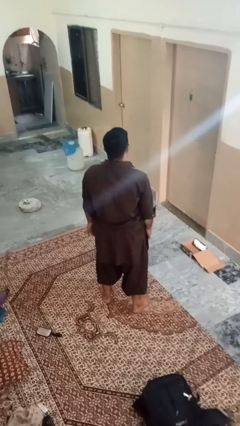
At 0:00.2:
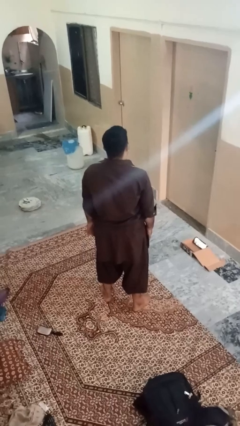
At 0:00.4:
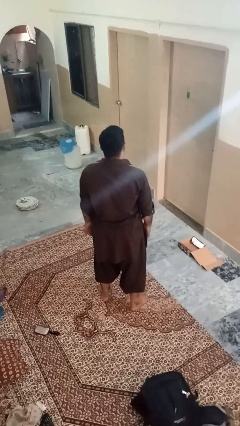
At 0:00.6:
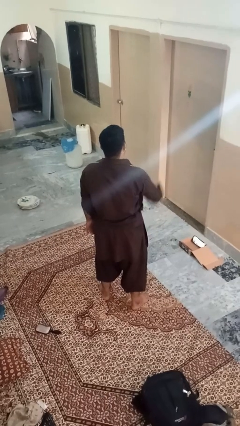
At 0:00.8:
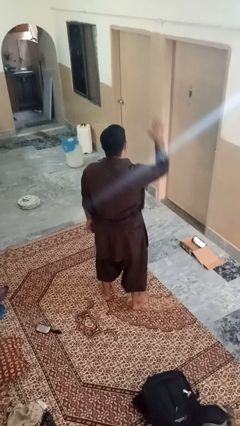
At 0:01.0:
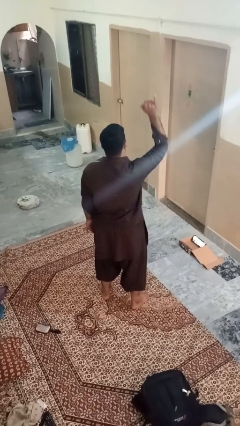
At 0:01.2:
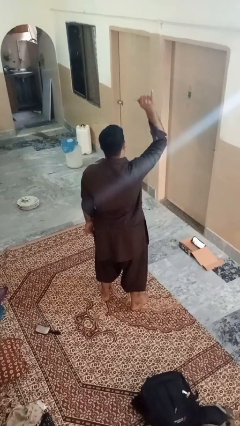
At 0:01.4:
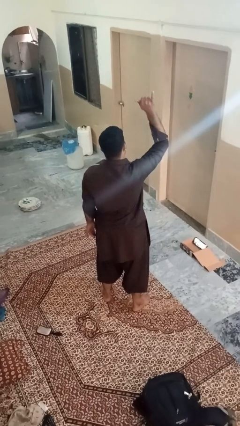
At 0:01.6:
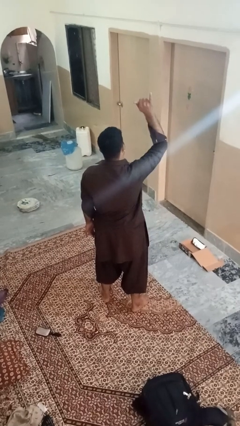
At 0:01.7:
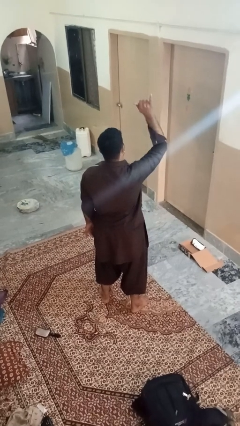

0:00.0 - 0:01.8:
person gestures hang loose

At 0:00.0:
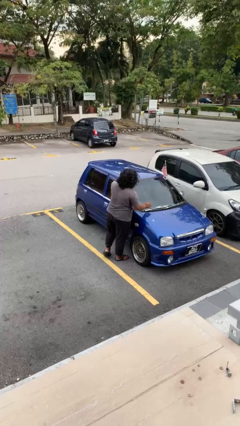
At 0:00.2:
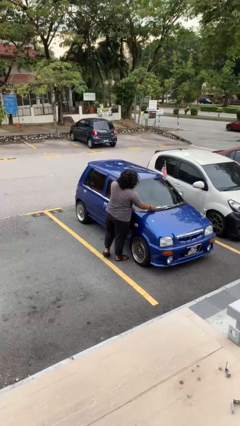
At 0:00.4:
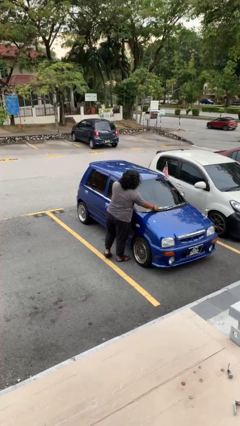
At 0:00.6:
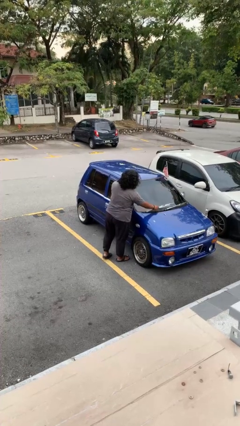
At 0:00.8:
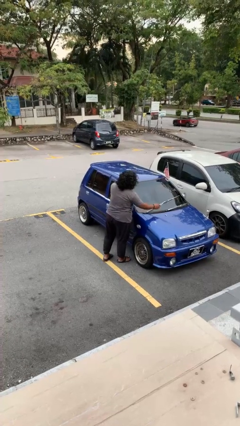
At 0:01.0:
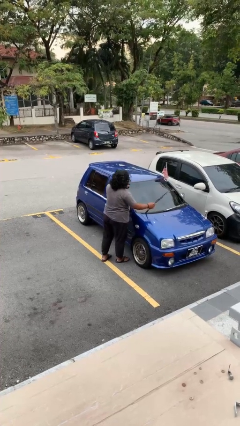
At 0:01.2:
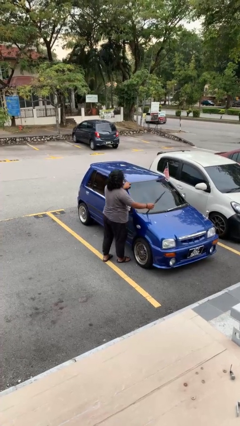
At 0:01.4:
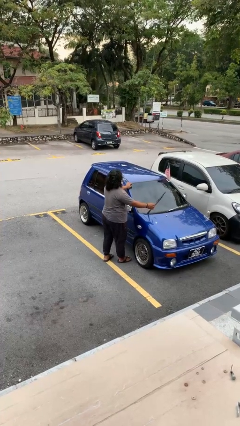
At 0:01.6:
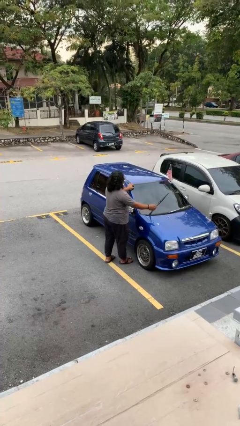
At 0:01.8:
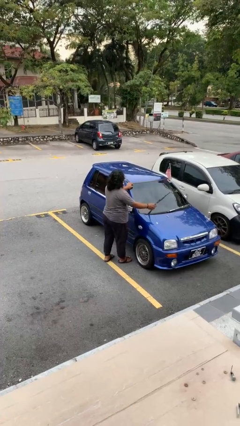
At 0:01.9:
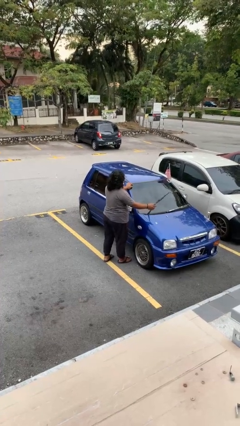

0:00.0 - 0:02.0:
person flips up car wipers

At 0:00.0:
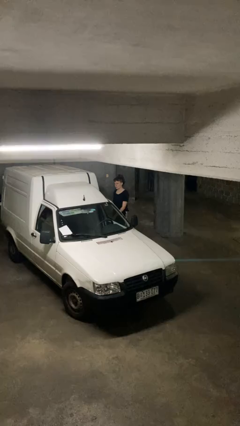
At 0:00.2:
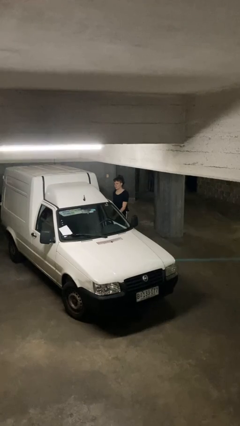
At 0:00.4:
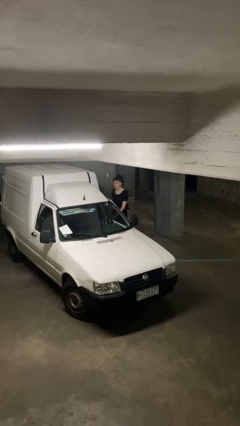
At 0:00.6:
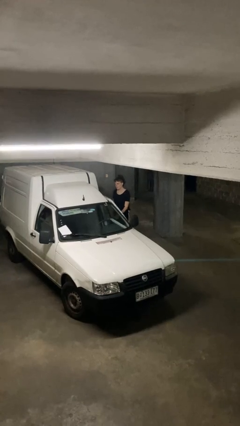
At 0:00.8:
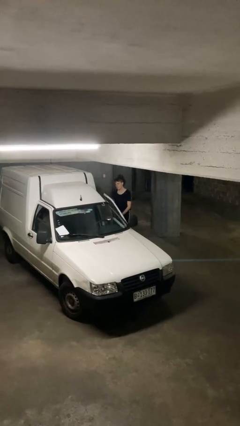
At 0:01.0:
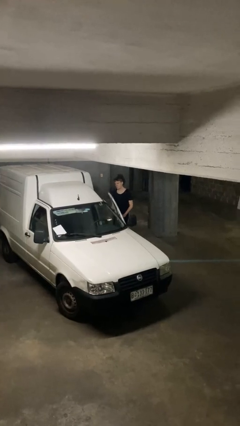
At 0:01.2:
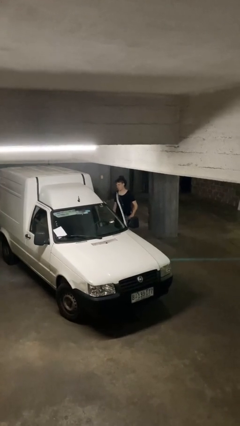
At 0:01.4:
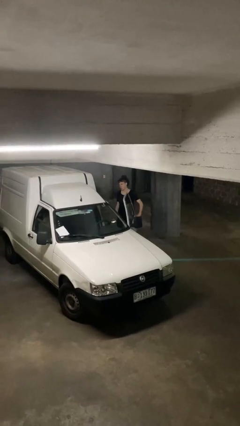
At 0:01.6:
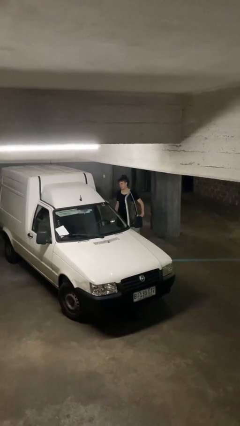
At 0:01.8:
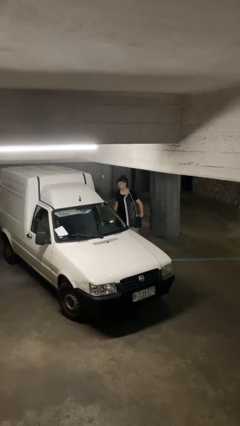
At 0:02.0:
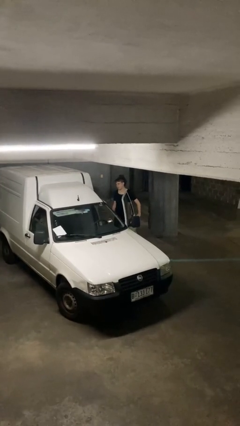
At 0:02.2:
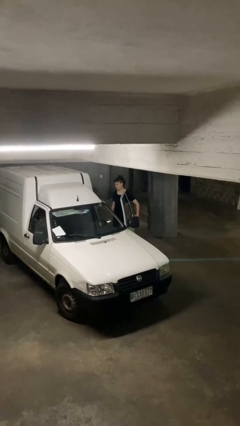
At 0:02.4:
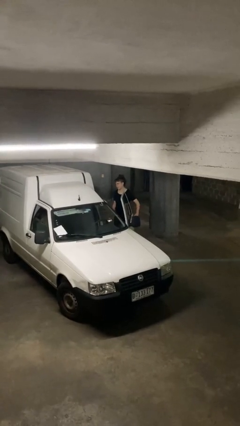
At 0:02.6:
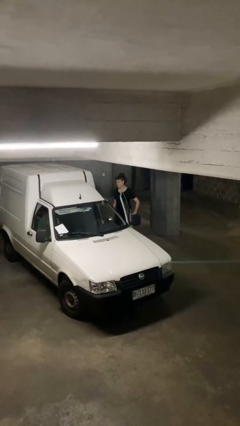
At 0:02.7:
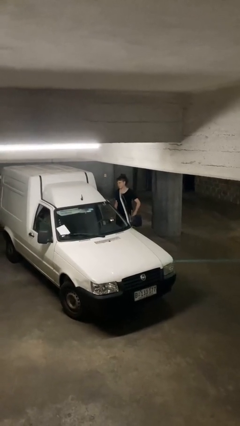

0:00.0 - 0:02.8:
person opens car door

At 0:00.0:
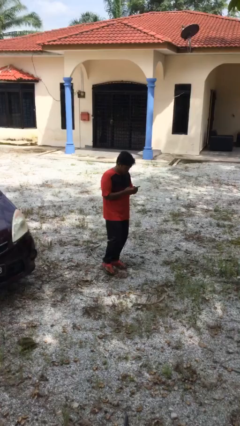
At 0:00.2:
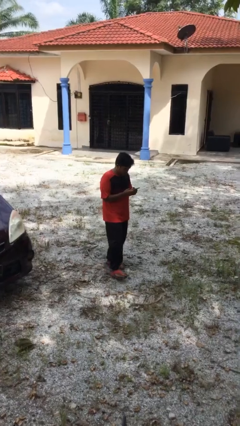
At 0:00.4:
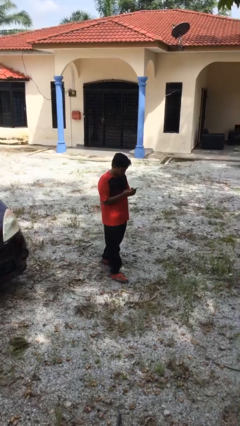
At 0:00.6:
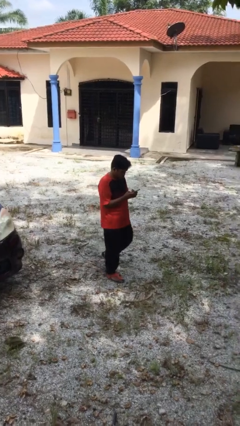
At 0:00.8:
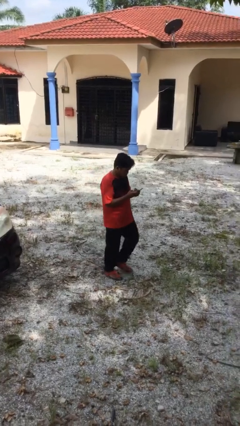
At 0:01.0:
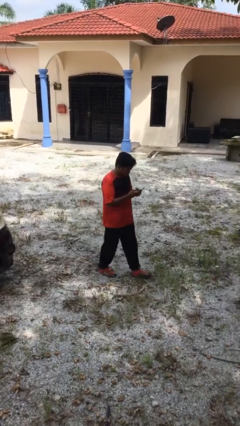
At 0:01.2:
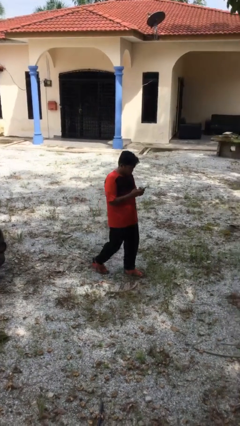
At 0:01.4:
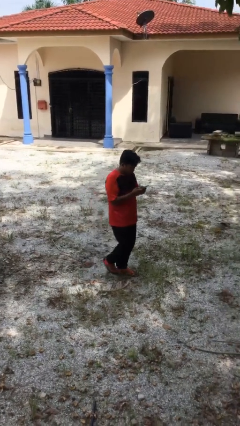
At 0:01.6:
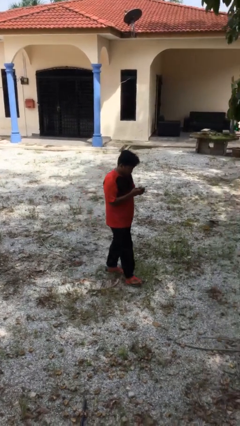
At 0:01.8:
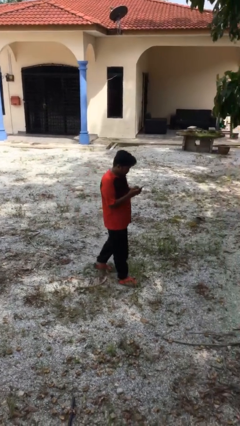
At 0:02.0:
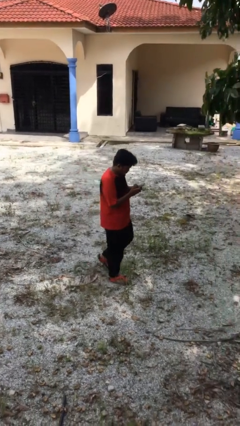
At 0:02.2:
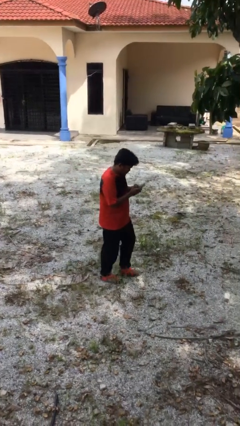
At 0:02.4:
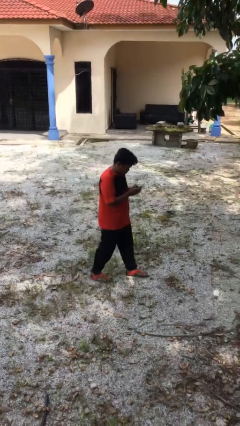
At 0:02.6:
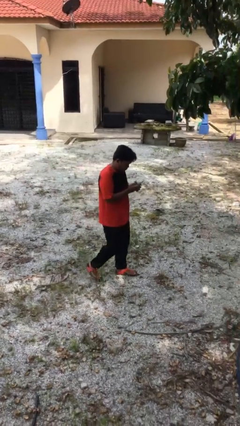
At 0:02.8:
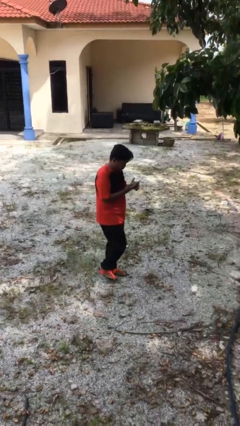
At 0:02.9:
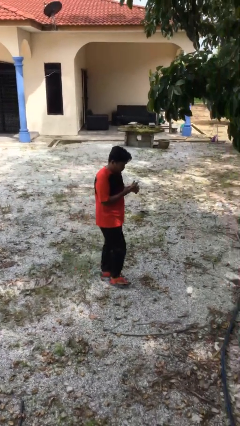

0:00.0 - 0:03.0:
person texts on phone

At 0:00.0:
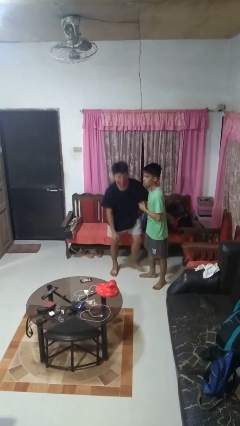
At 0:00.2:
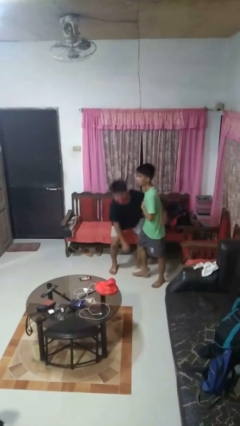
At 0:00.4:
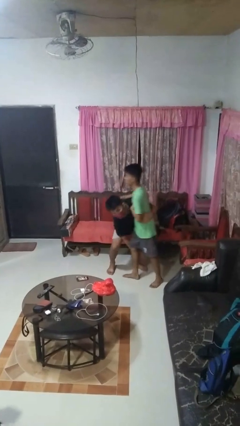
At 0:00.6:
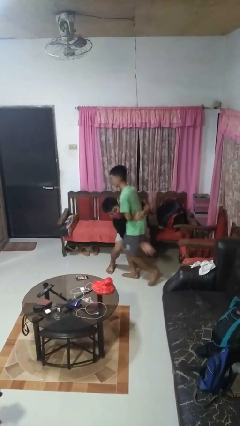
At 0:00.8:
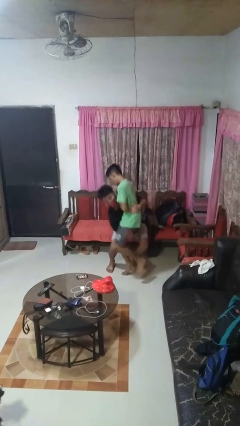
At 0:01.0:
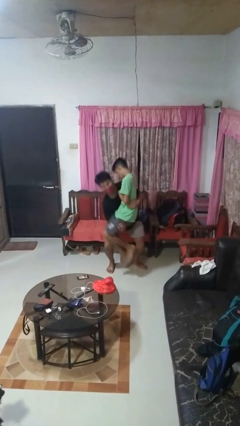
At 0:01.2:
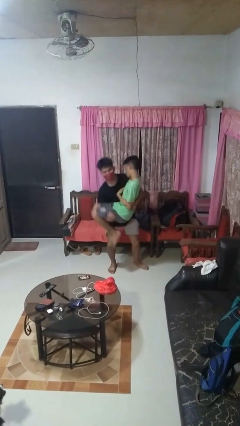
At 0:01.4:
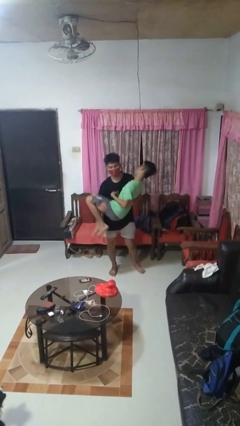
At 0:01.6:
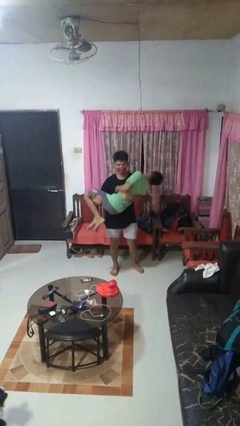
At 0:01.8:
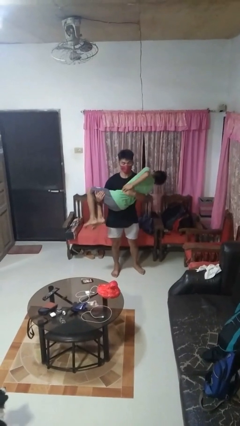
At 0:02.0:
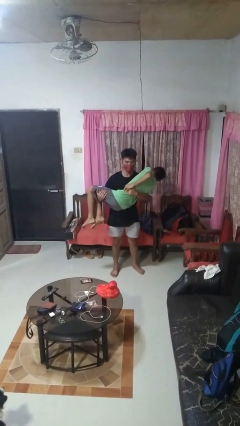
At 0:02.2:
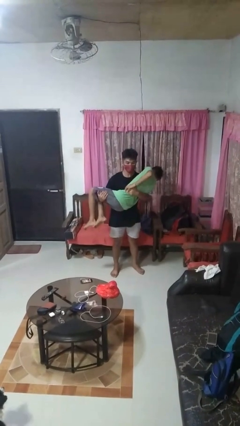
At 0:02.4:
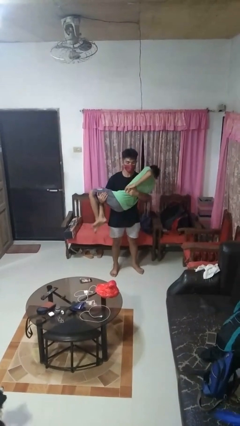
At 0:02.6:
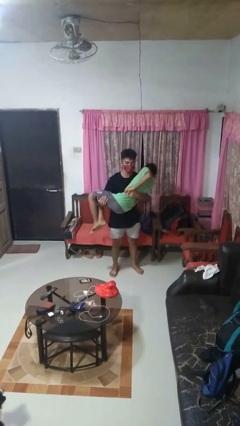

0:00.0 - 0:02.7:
person picks up person

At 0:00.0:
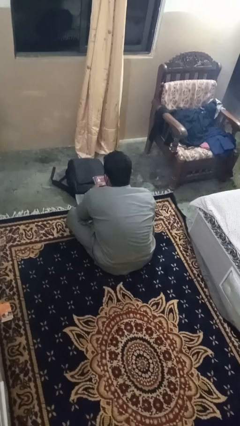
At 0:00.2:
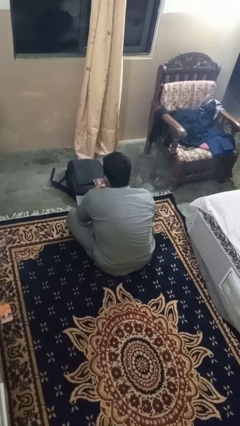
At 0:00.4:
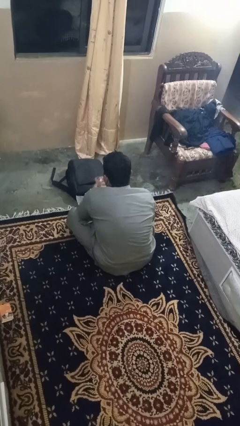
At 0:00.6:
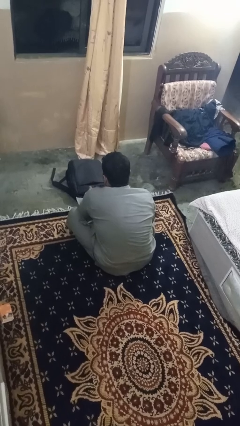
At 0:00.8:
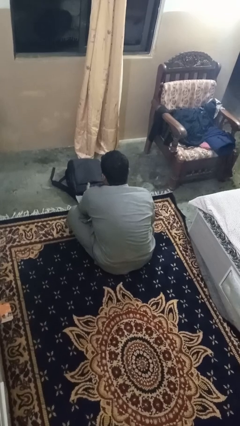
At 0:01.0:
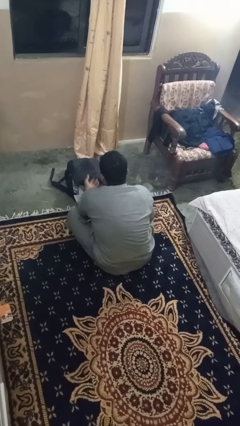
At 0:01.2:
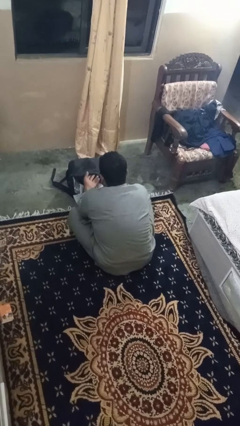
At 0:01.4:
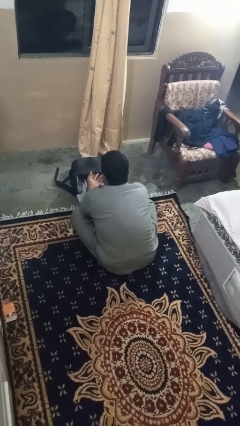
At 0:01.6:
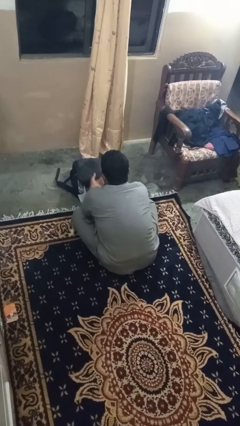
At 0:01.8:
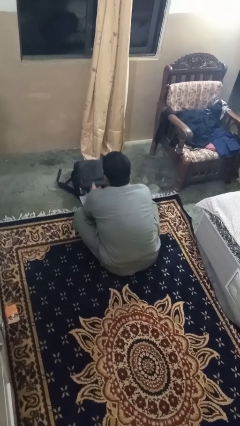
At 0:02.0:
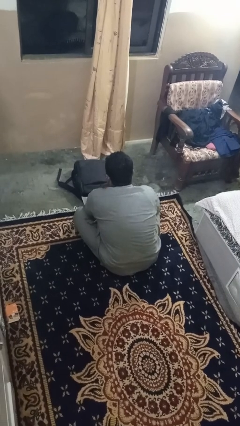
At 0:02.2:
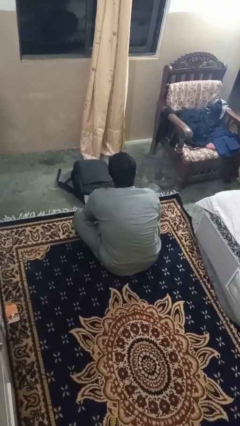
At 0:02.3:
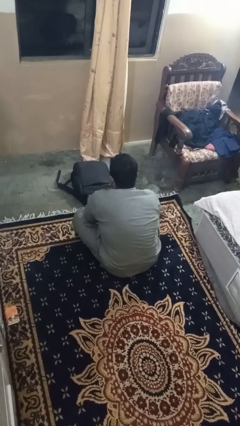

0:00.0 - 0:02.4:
person puts object into bag

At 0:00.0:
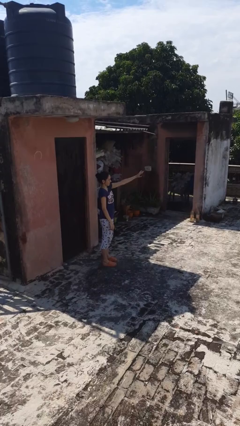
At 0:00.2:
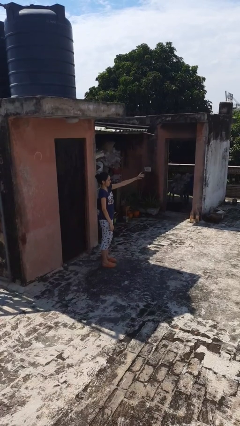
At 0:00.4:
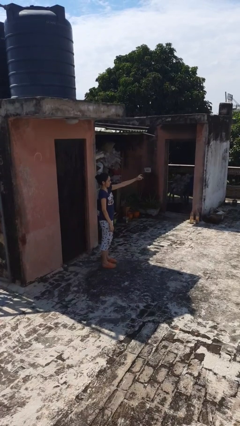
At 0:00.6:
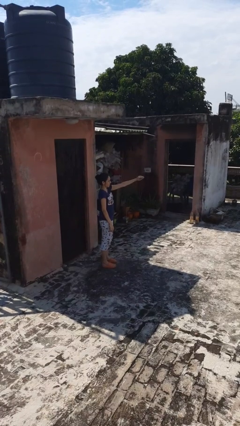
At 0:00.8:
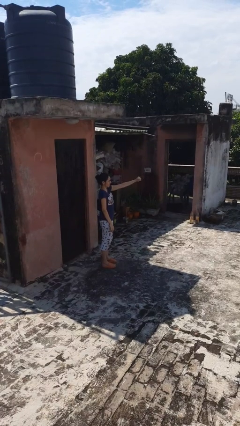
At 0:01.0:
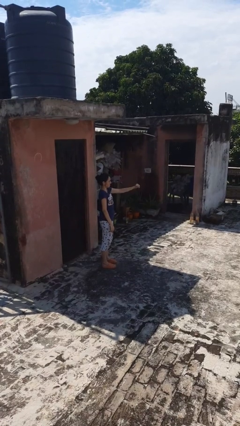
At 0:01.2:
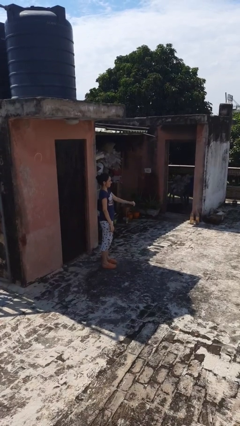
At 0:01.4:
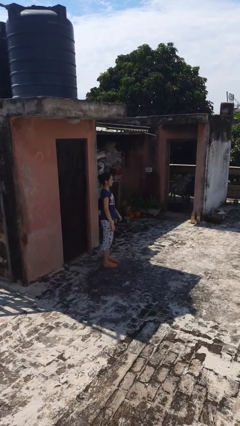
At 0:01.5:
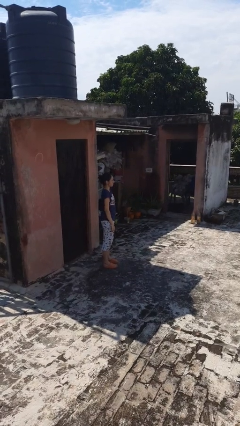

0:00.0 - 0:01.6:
person gestures come here

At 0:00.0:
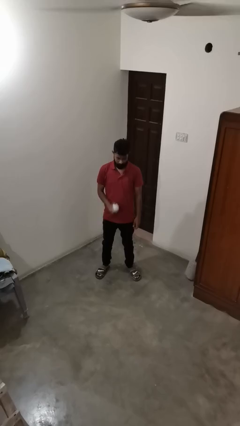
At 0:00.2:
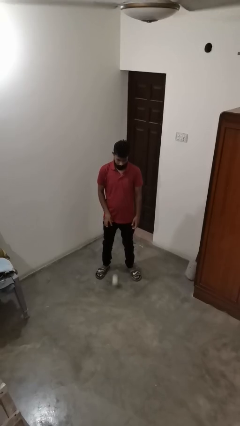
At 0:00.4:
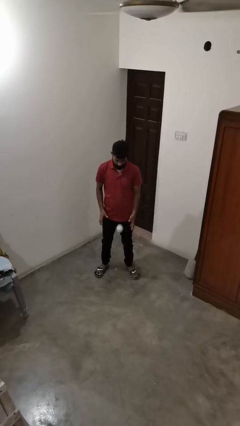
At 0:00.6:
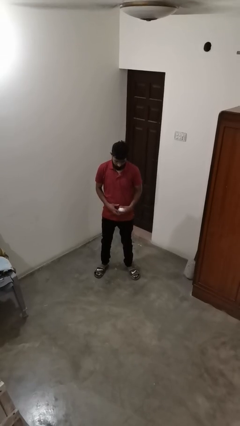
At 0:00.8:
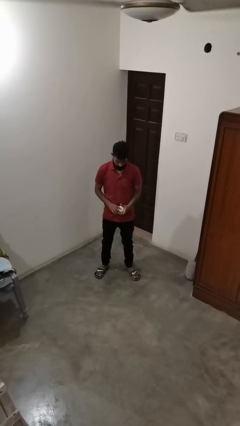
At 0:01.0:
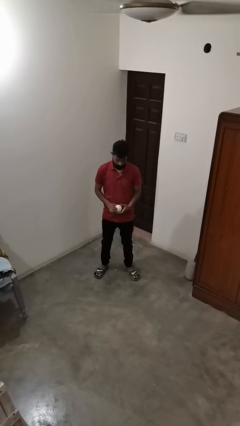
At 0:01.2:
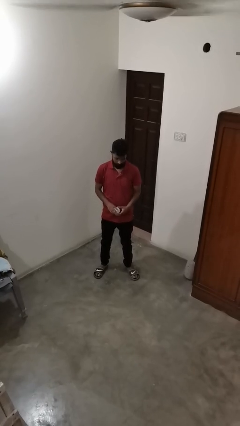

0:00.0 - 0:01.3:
person bounces ball on floor
